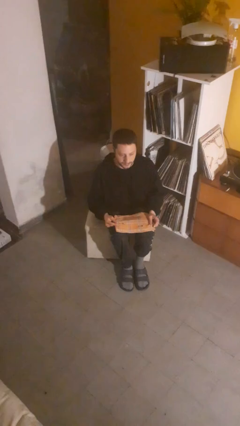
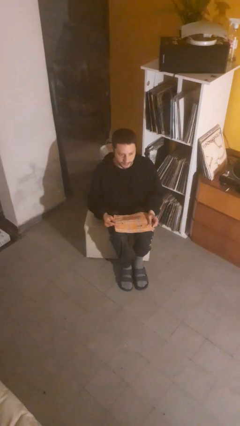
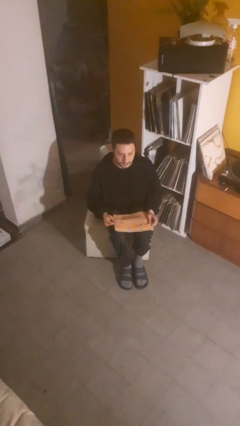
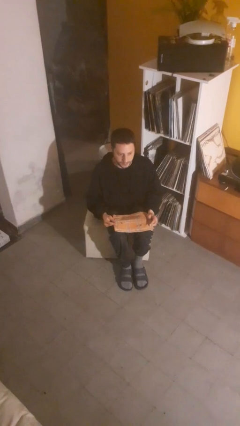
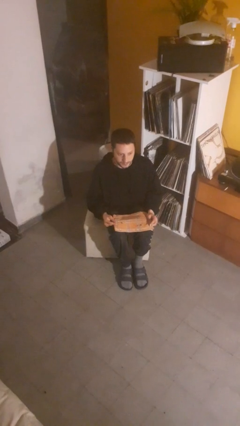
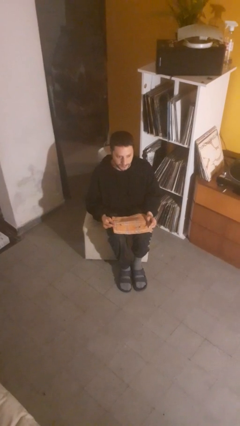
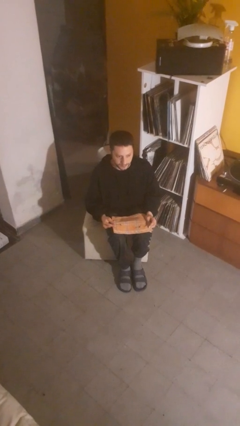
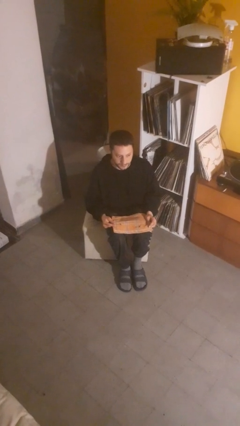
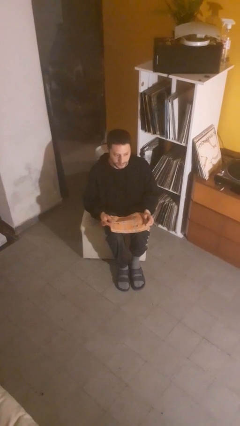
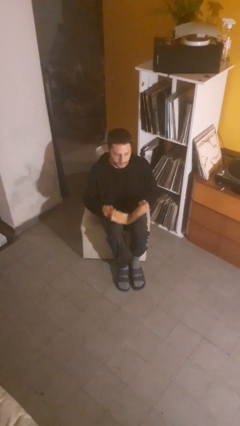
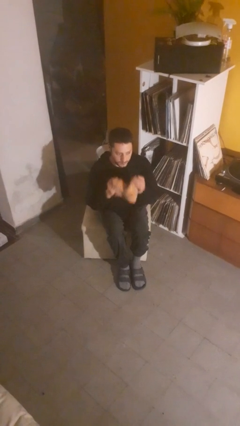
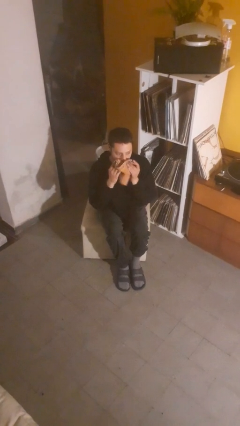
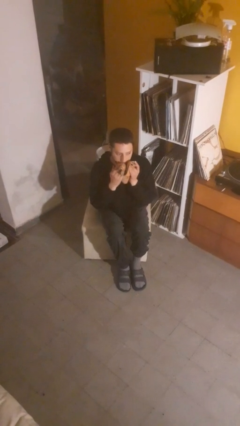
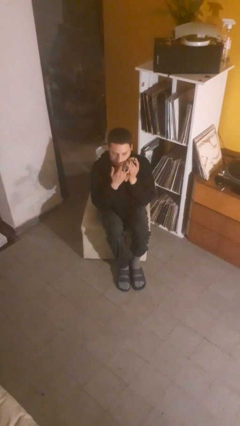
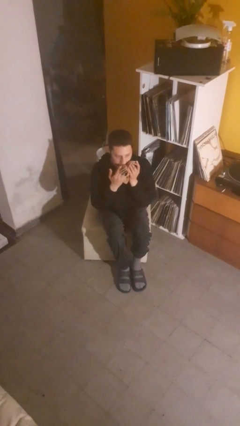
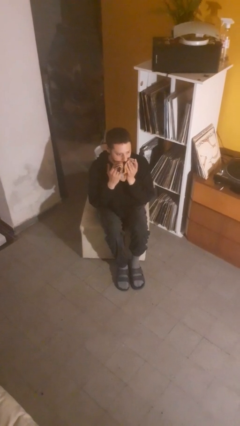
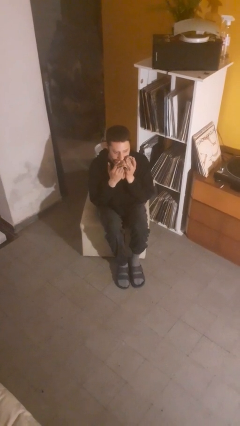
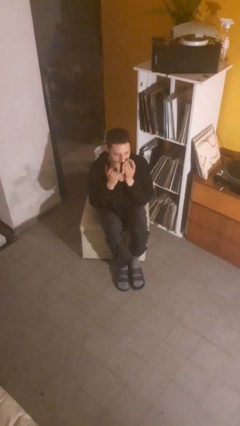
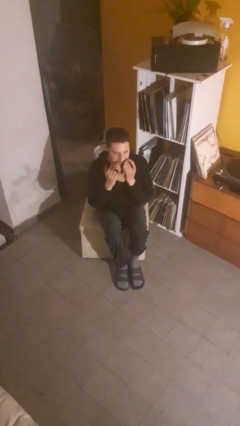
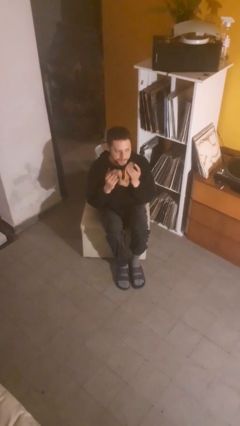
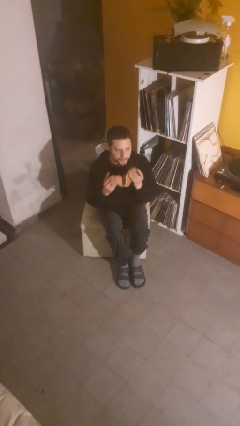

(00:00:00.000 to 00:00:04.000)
person wipes mouth with napkin

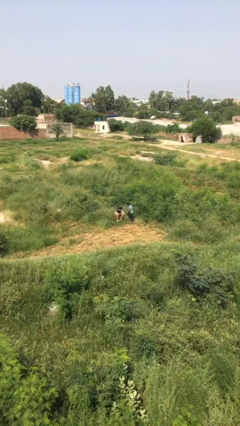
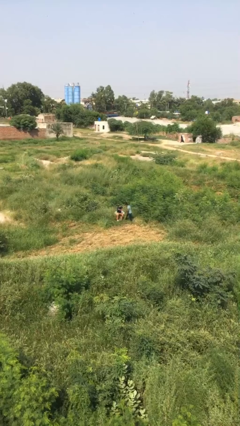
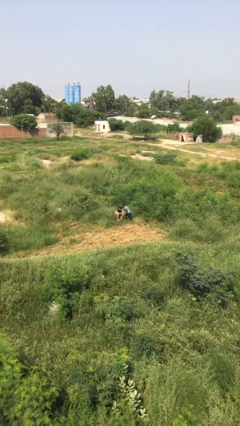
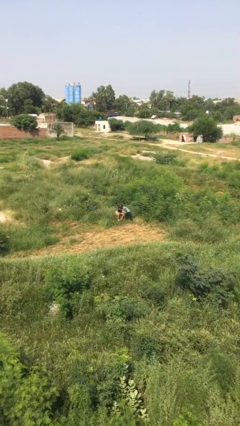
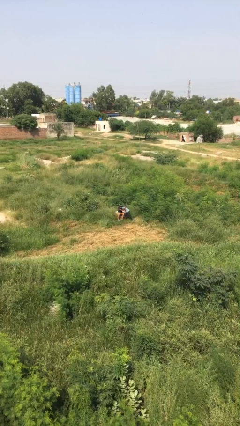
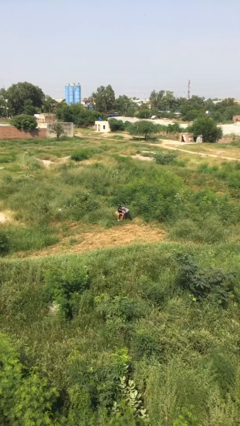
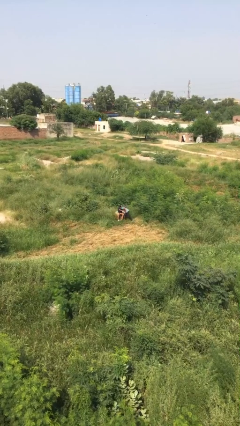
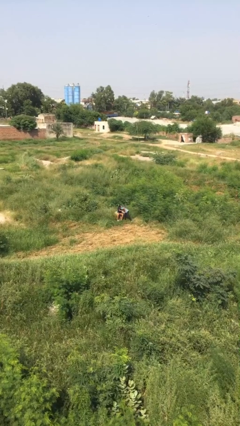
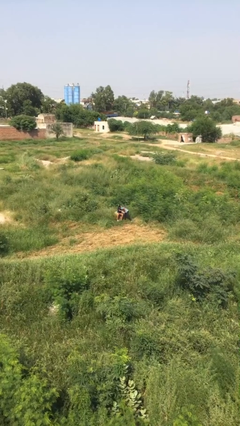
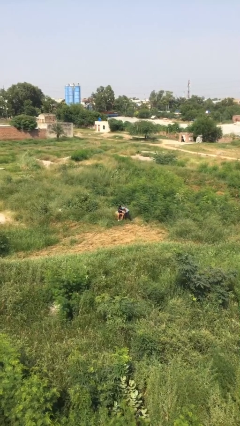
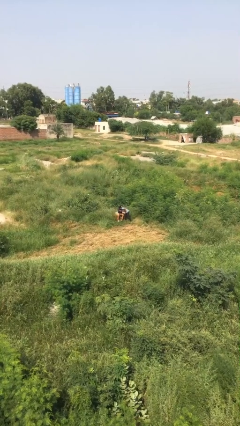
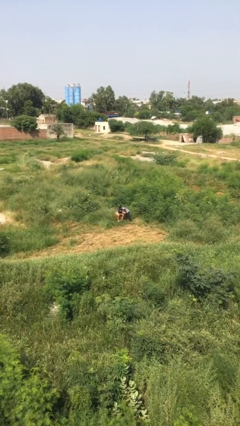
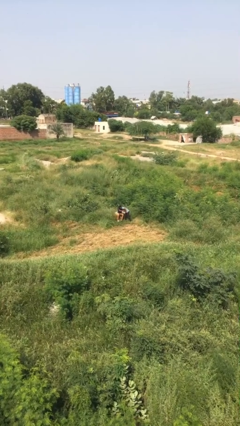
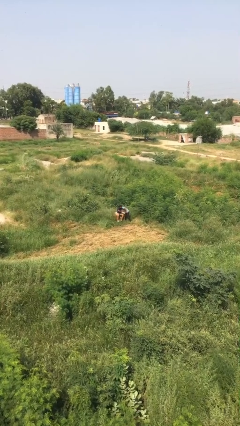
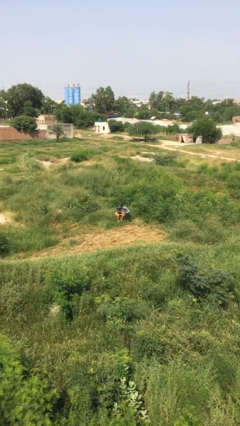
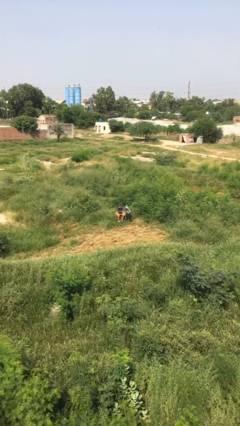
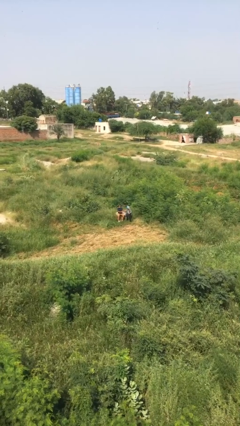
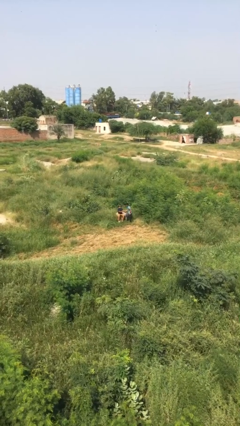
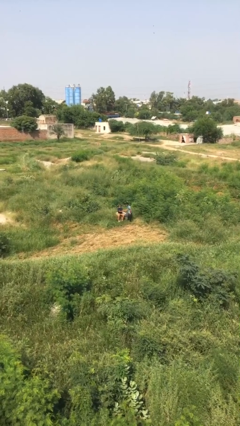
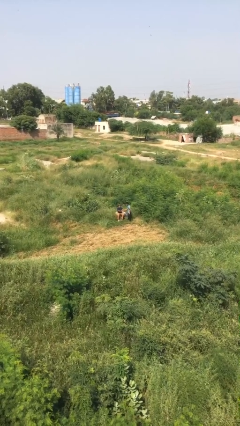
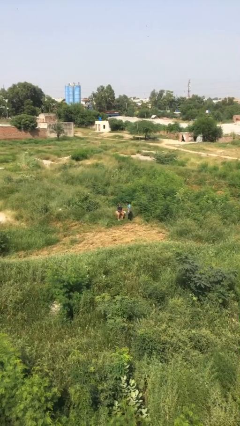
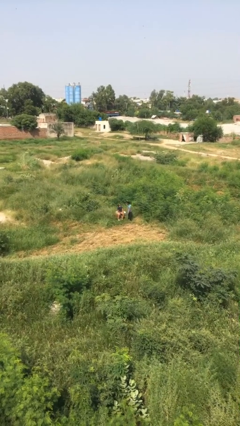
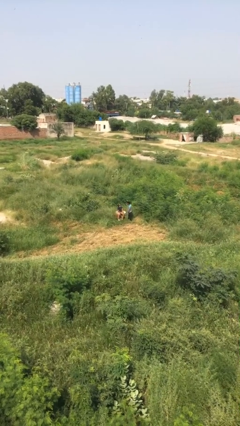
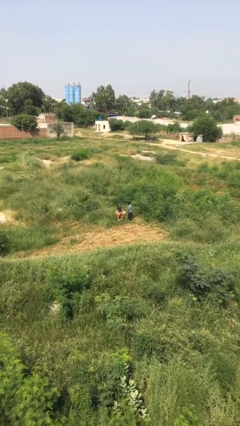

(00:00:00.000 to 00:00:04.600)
person embraces person

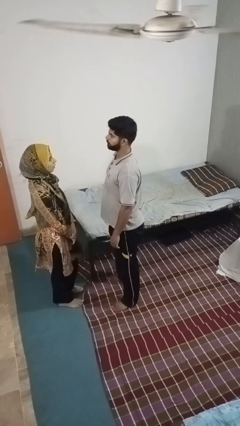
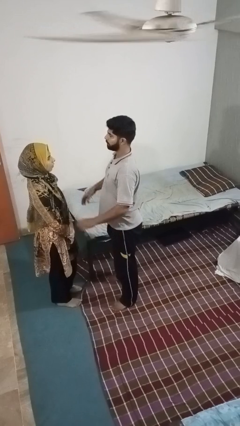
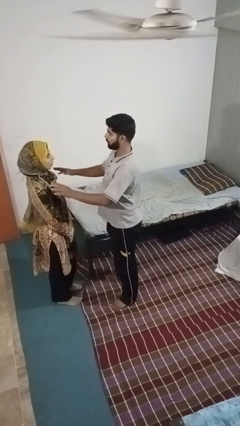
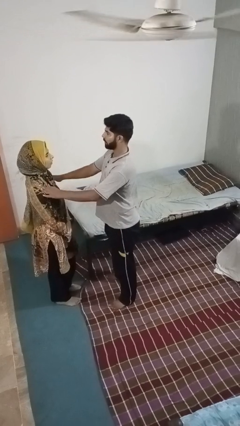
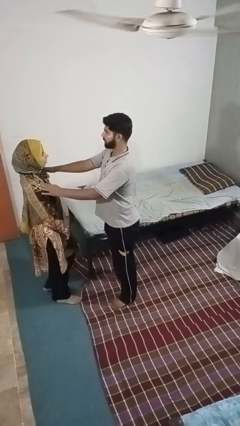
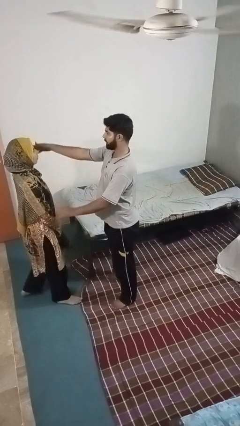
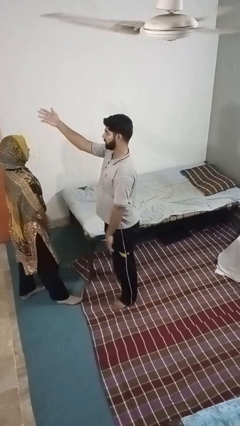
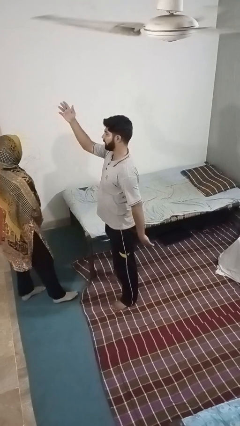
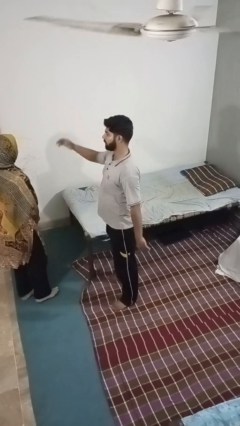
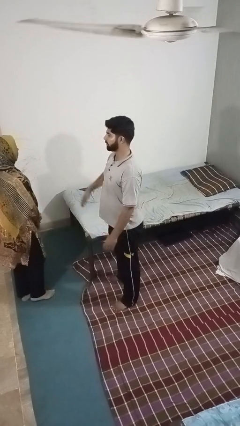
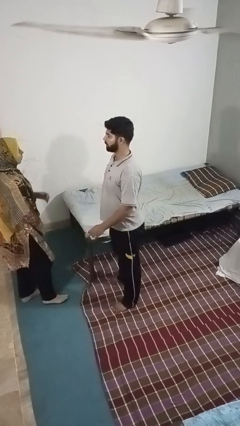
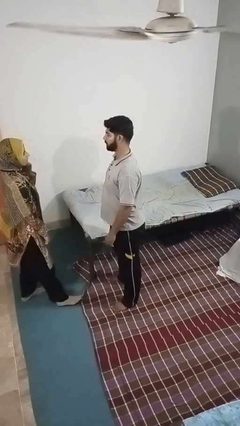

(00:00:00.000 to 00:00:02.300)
person shoves person

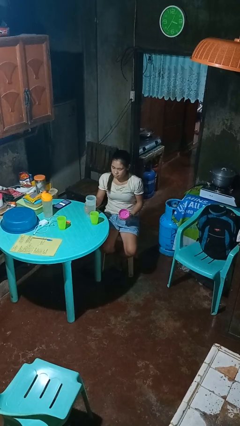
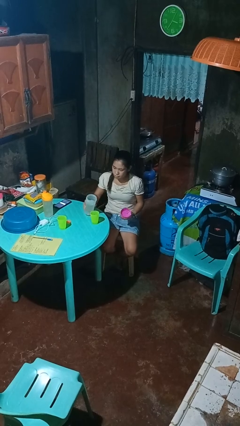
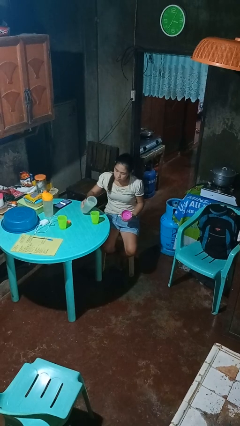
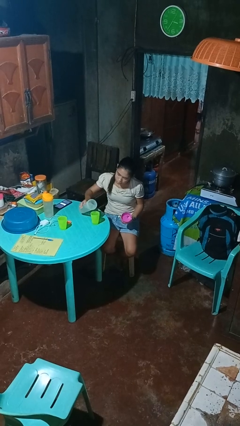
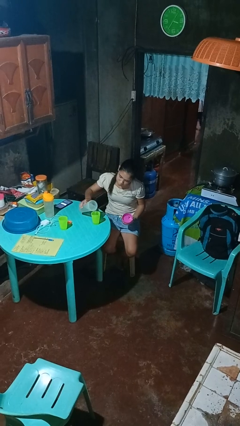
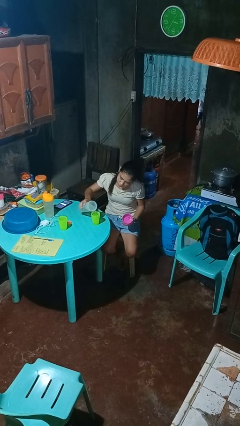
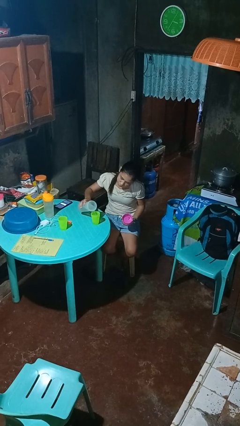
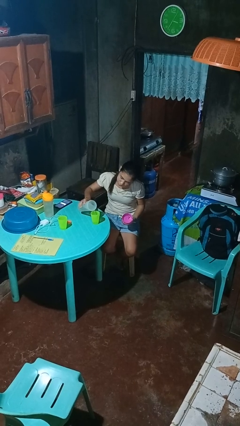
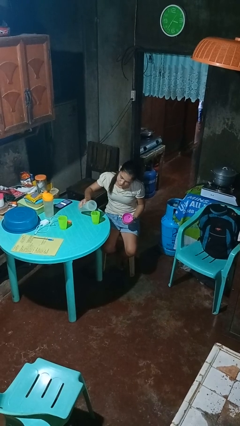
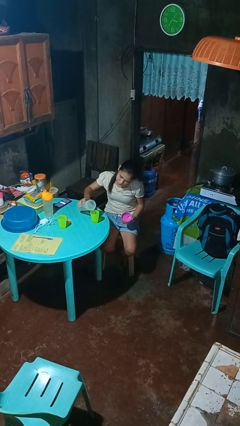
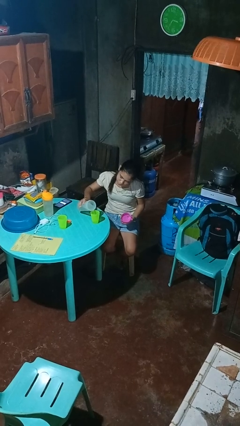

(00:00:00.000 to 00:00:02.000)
person pours liquid into cup

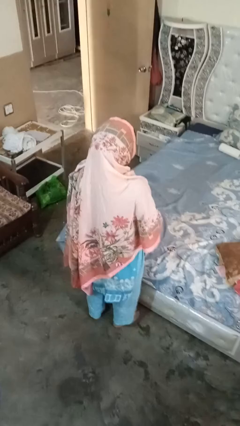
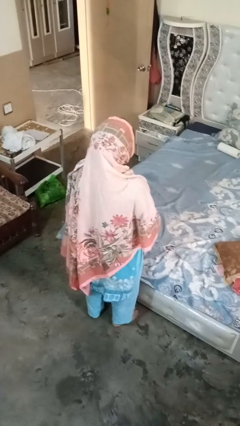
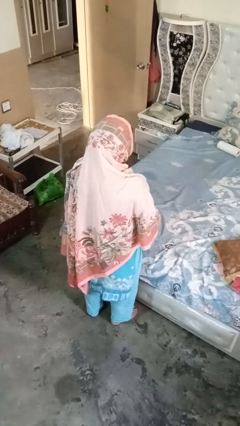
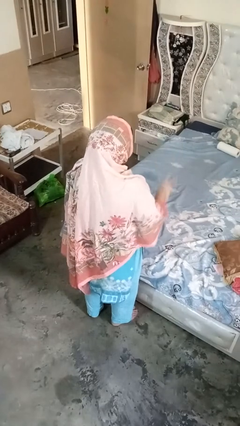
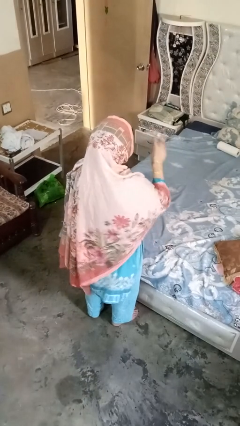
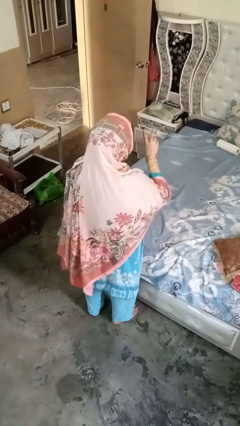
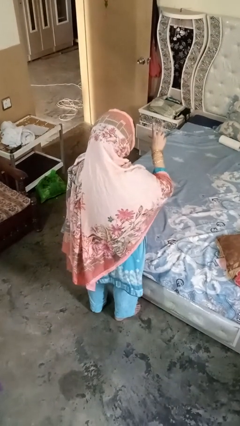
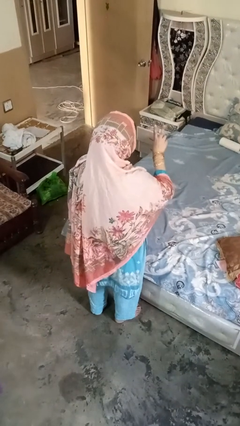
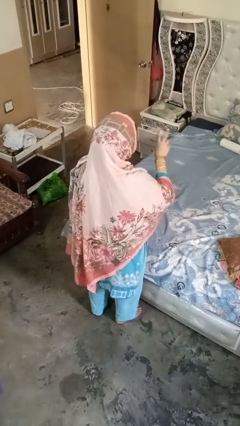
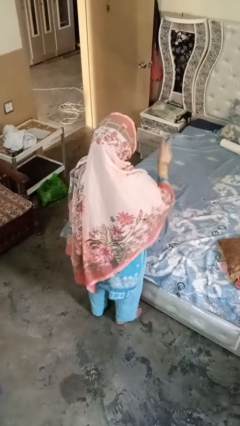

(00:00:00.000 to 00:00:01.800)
person gestures be quiet

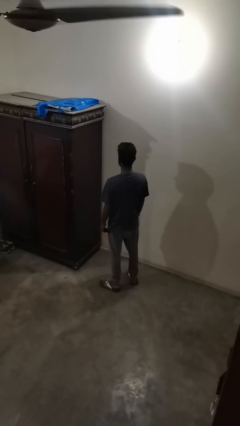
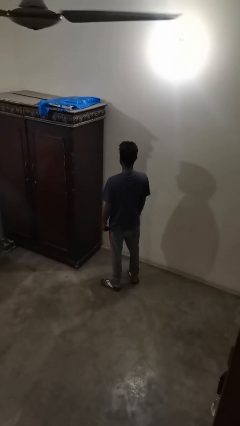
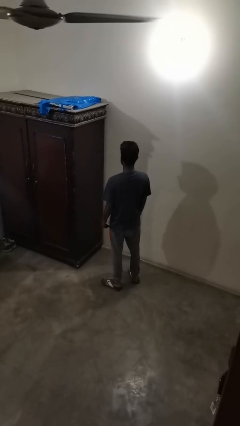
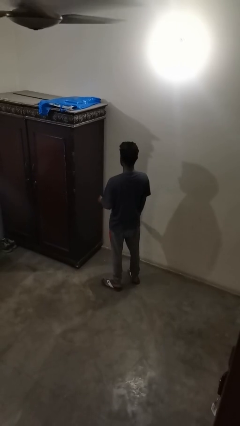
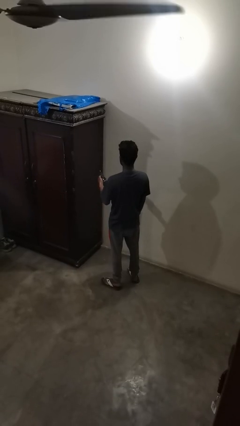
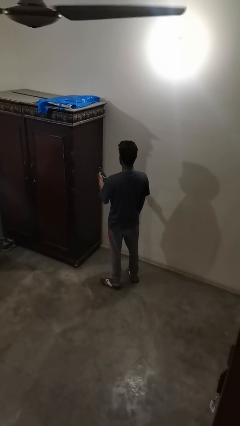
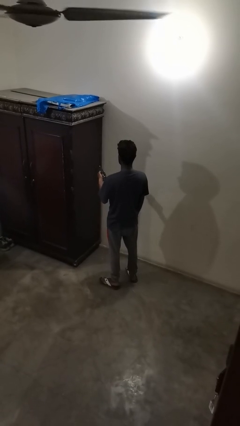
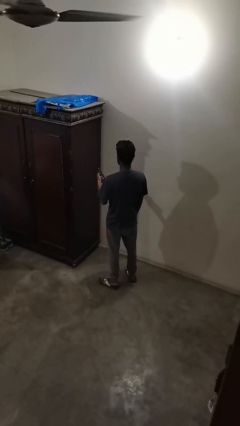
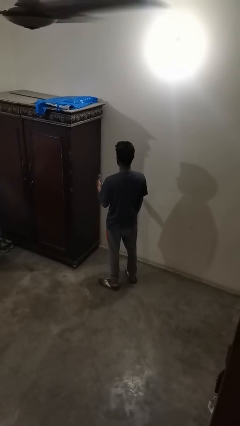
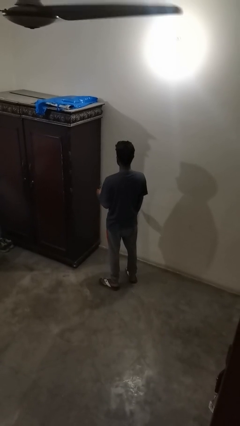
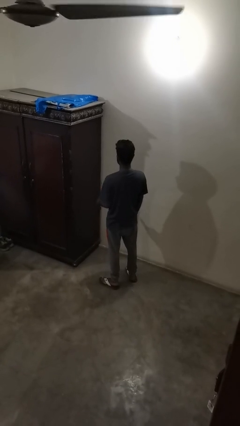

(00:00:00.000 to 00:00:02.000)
person uses television remote

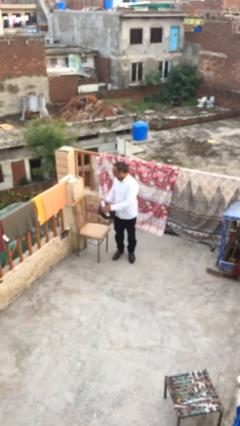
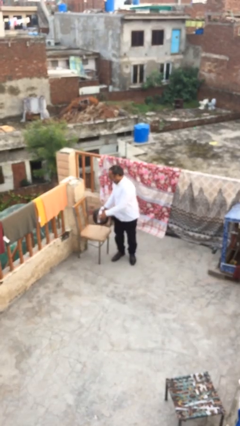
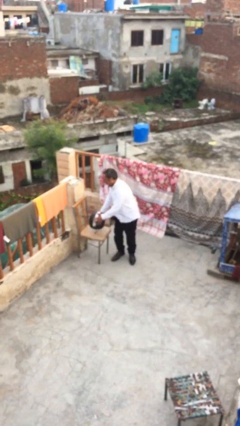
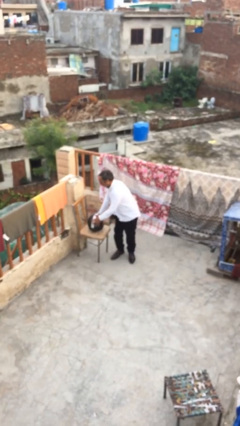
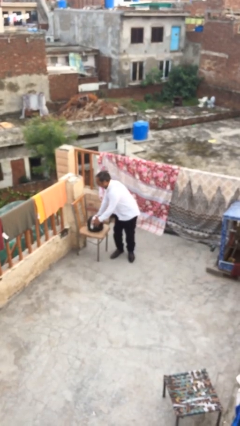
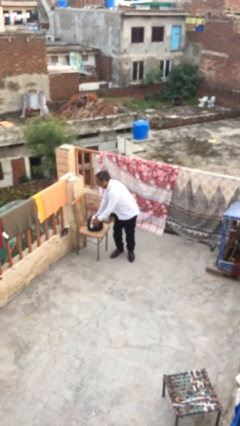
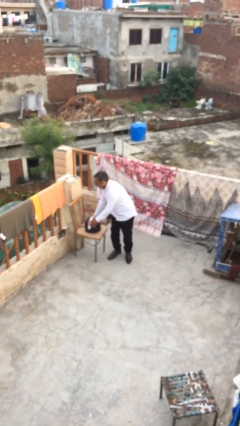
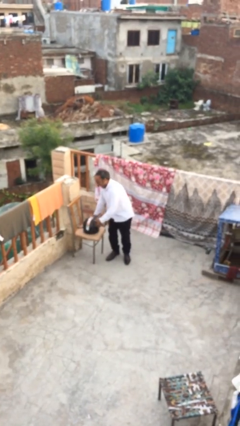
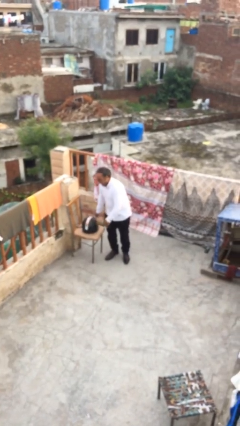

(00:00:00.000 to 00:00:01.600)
person puts down object on table
